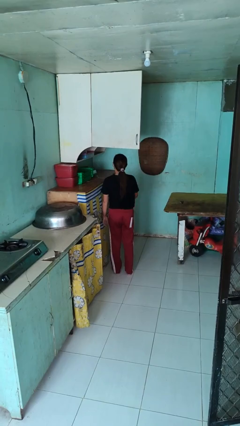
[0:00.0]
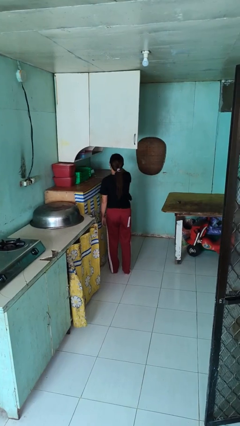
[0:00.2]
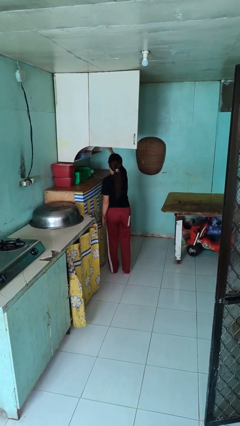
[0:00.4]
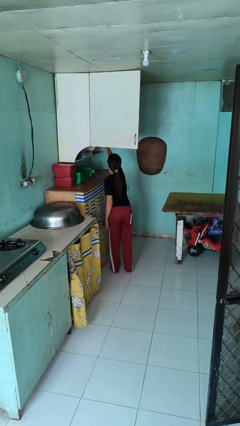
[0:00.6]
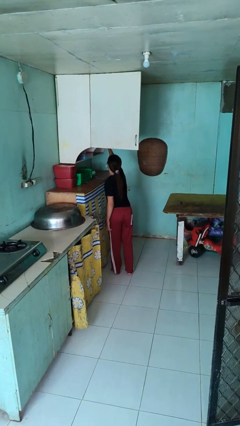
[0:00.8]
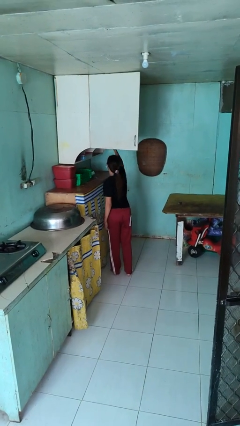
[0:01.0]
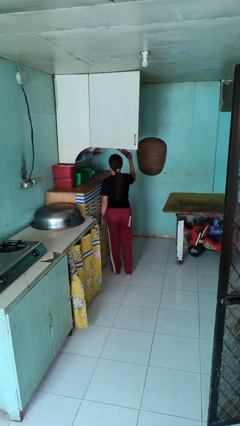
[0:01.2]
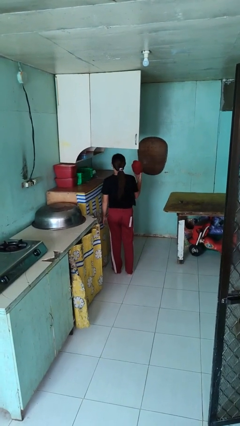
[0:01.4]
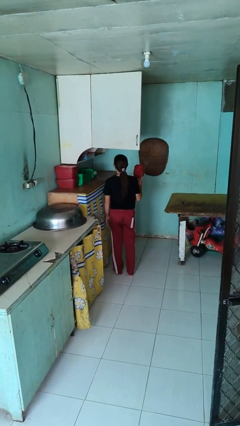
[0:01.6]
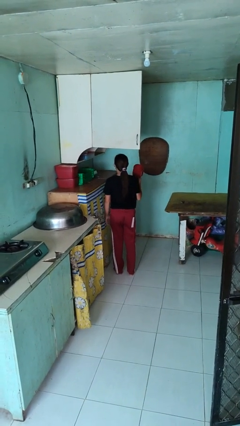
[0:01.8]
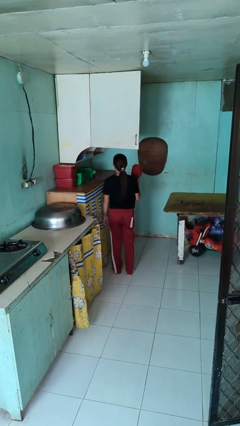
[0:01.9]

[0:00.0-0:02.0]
person takes object from cabinet

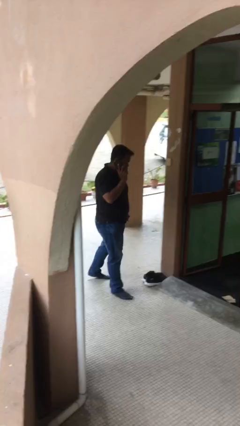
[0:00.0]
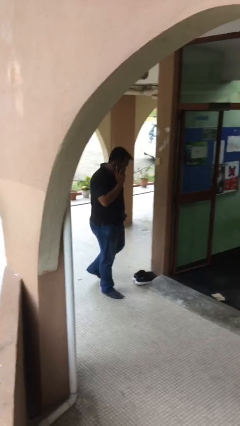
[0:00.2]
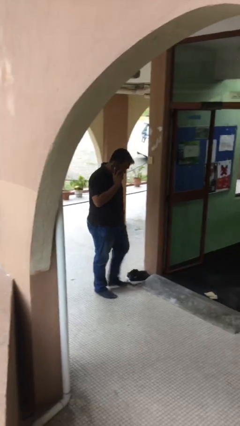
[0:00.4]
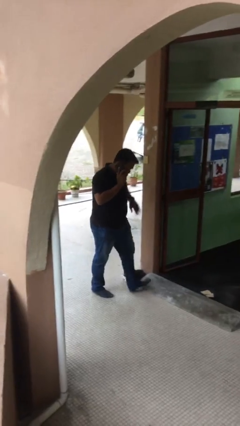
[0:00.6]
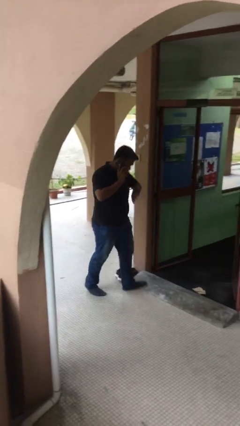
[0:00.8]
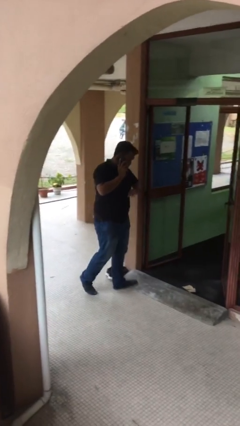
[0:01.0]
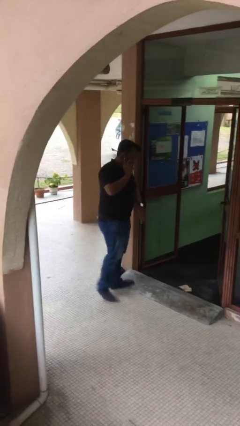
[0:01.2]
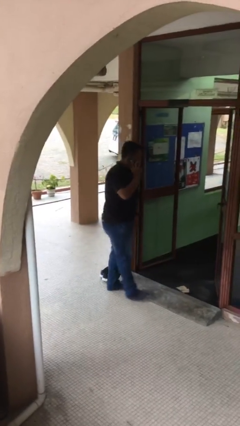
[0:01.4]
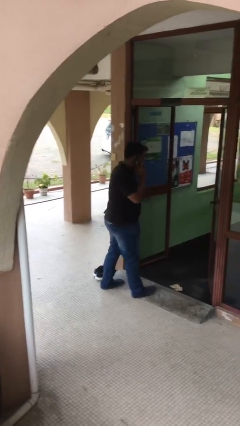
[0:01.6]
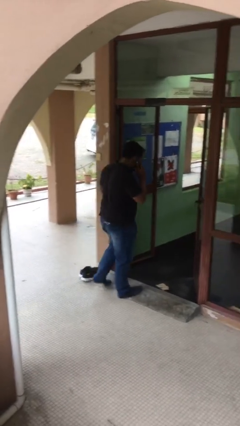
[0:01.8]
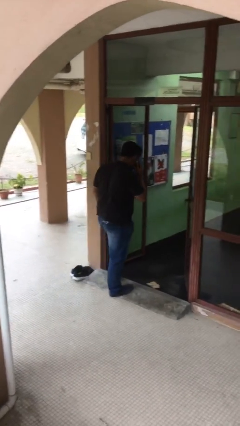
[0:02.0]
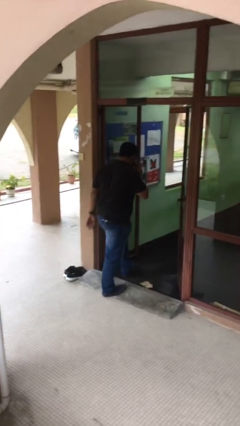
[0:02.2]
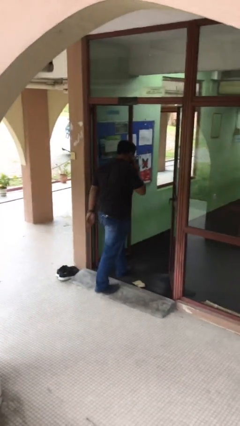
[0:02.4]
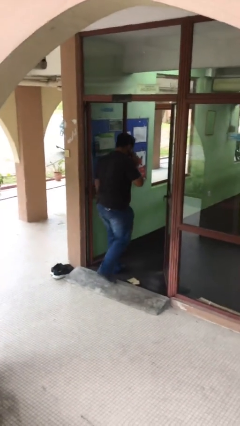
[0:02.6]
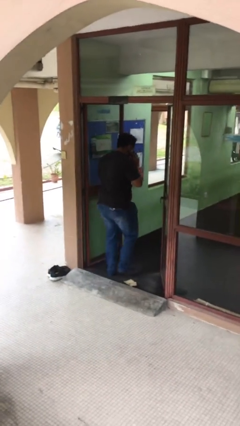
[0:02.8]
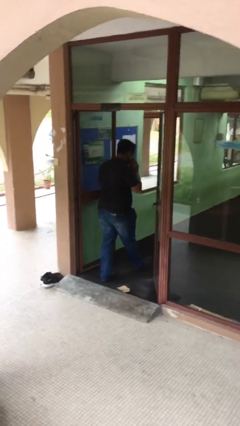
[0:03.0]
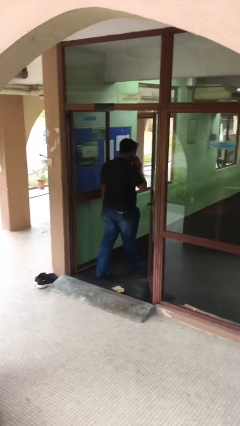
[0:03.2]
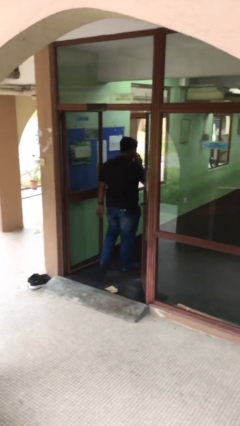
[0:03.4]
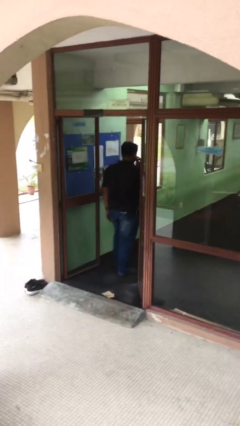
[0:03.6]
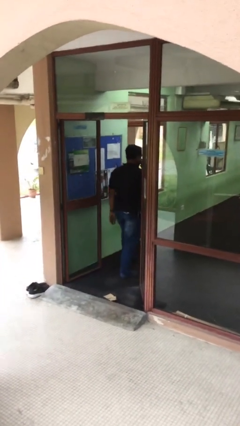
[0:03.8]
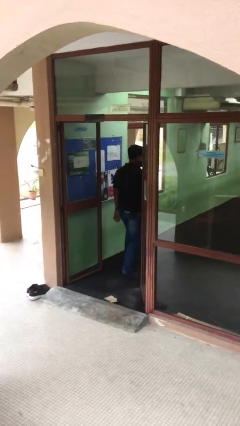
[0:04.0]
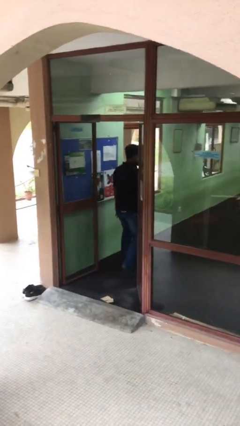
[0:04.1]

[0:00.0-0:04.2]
person exits scene through structure

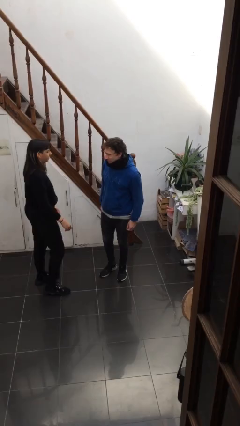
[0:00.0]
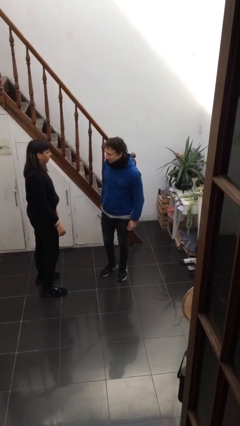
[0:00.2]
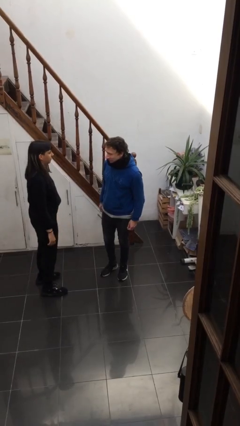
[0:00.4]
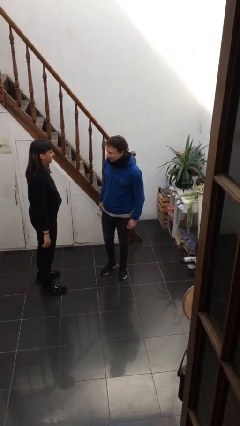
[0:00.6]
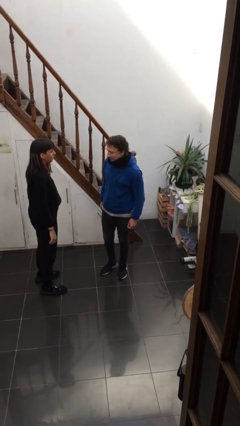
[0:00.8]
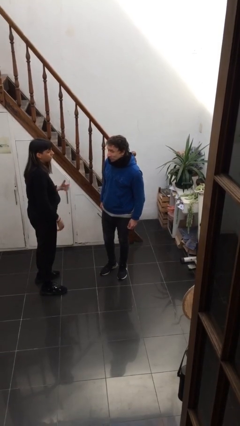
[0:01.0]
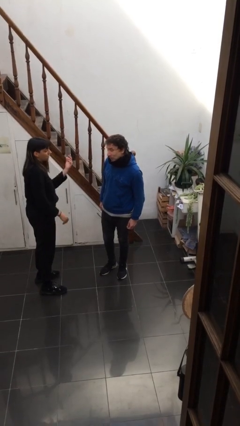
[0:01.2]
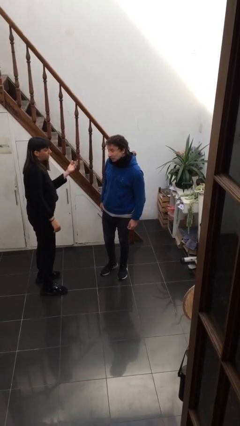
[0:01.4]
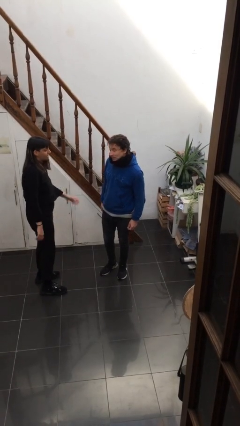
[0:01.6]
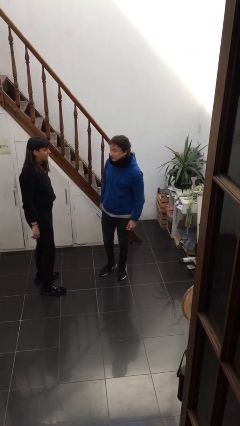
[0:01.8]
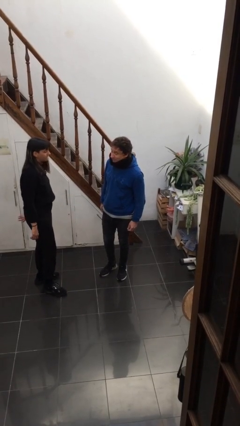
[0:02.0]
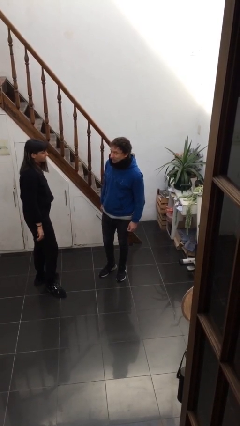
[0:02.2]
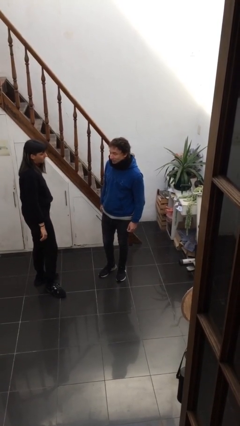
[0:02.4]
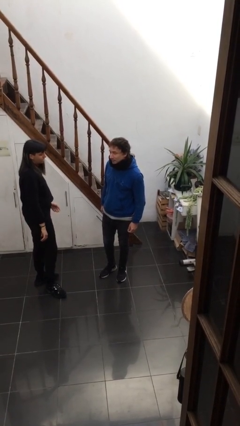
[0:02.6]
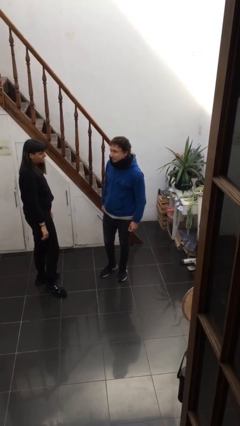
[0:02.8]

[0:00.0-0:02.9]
person talks to person

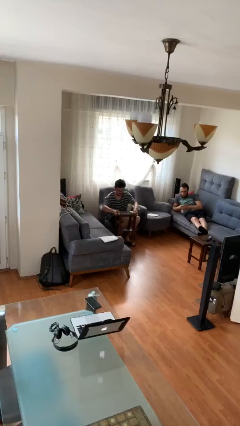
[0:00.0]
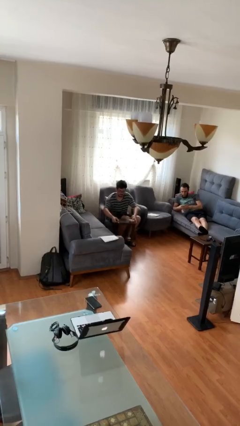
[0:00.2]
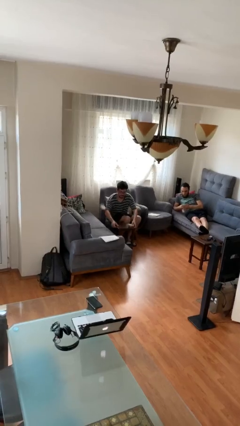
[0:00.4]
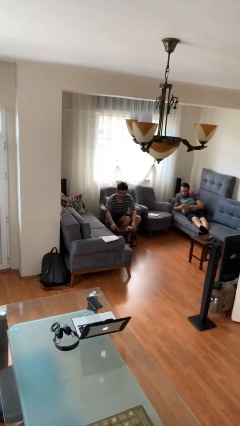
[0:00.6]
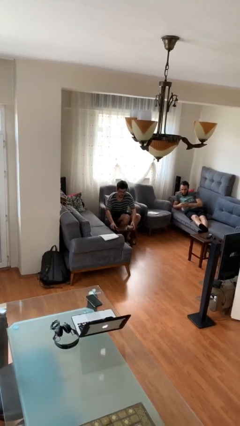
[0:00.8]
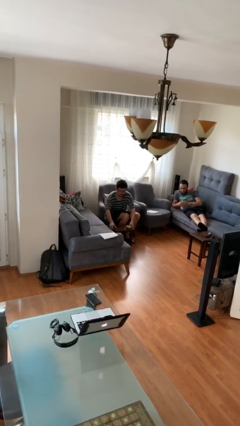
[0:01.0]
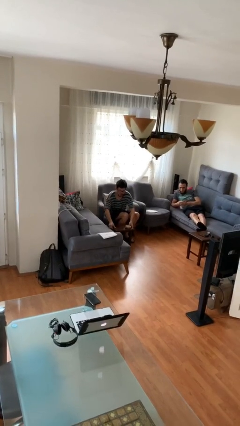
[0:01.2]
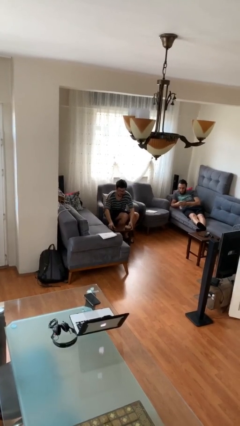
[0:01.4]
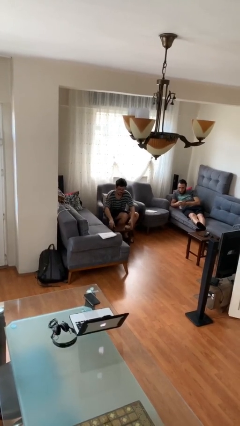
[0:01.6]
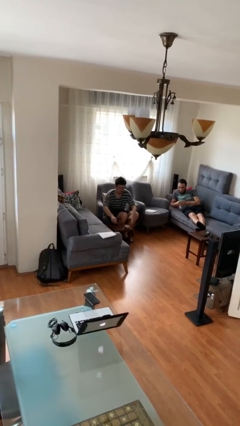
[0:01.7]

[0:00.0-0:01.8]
person puts down object on floor

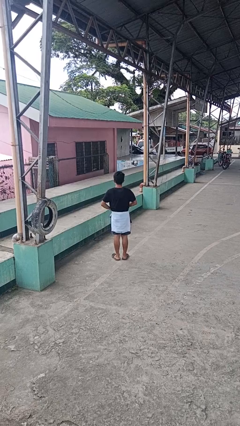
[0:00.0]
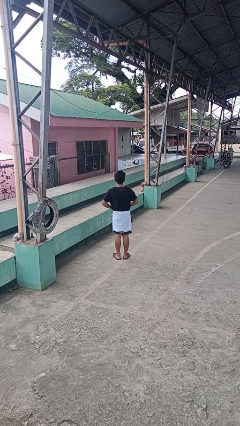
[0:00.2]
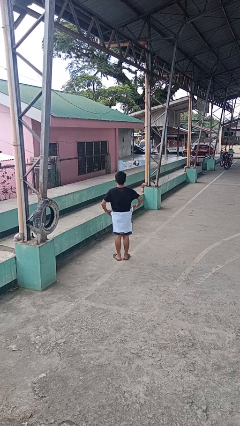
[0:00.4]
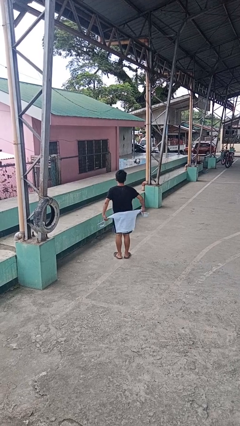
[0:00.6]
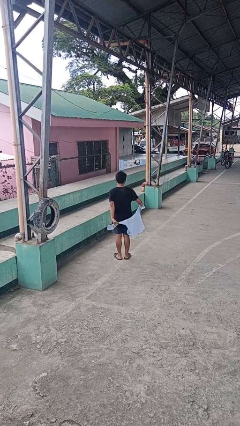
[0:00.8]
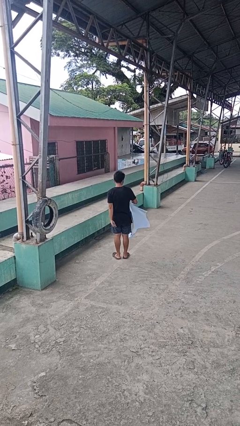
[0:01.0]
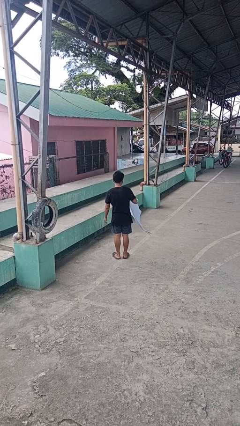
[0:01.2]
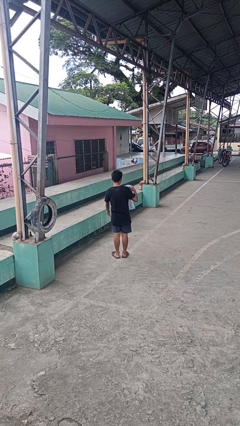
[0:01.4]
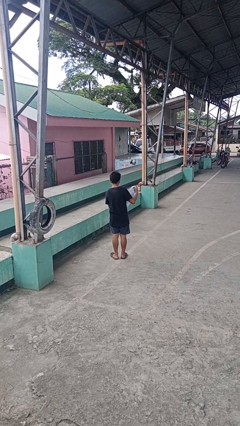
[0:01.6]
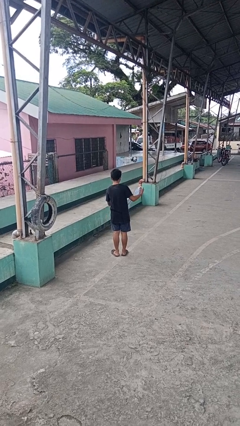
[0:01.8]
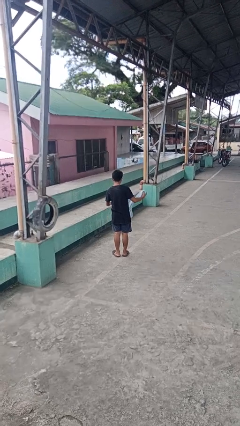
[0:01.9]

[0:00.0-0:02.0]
person unties jacket around waist

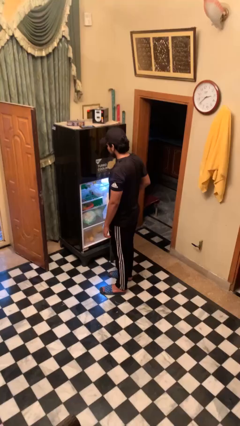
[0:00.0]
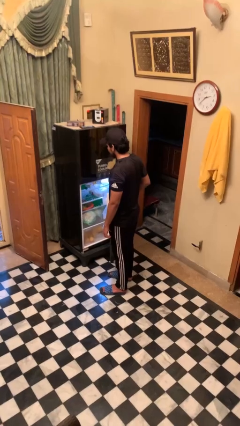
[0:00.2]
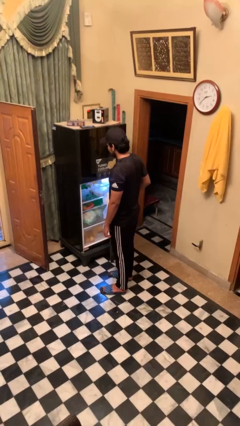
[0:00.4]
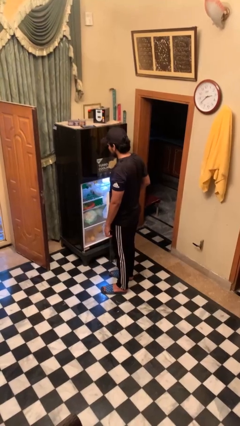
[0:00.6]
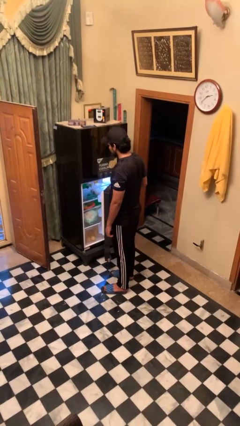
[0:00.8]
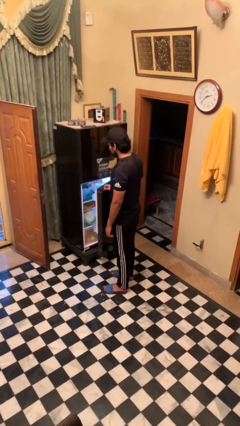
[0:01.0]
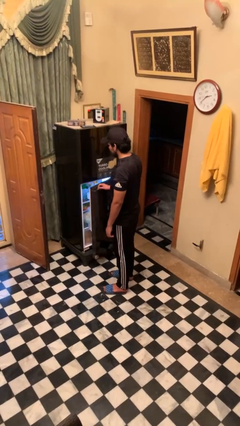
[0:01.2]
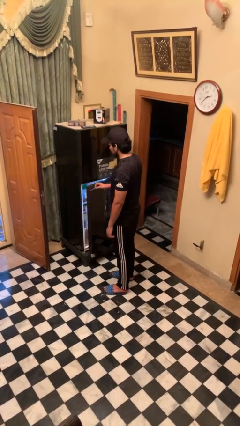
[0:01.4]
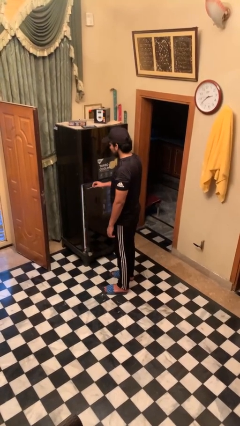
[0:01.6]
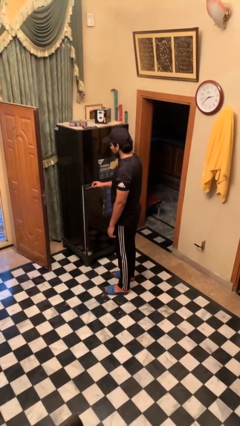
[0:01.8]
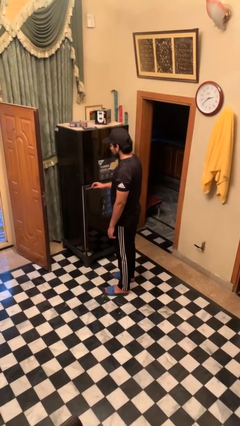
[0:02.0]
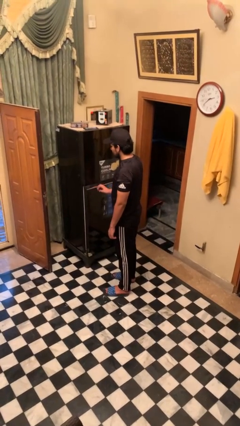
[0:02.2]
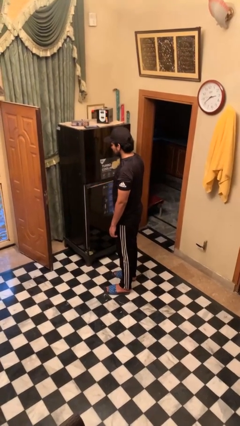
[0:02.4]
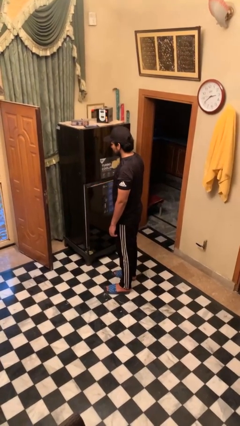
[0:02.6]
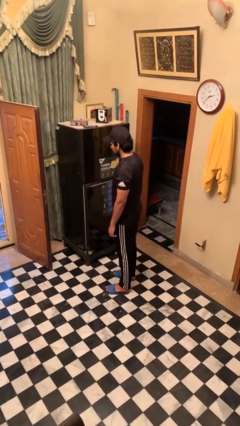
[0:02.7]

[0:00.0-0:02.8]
person closes refrigerator

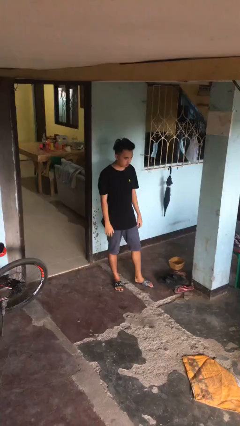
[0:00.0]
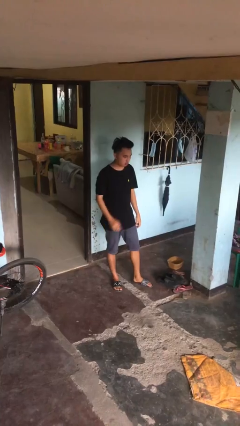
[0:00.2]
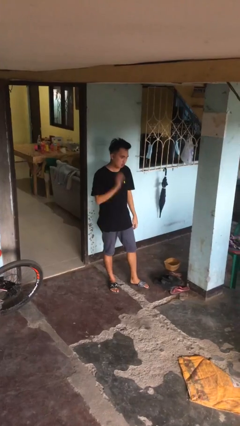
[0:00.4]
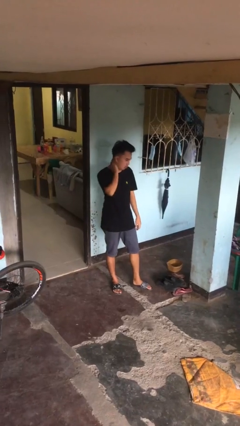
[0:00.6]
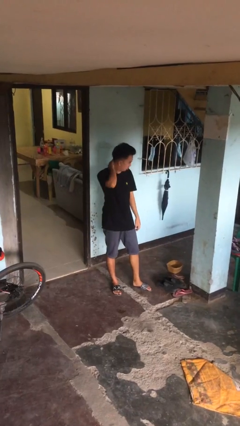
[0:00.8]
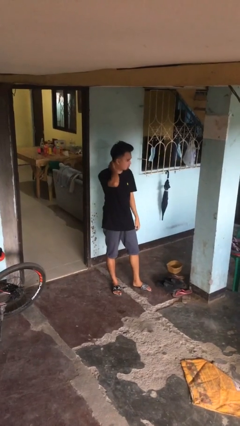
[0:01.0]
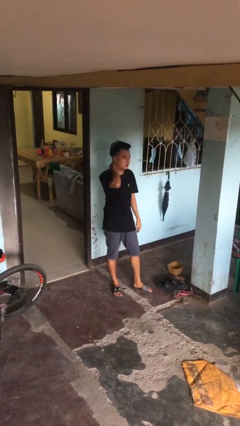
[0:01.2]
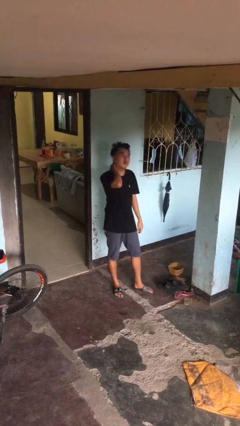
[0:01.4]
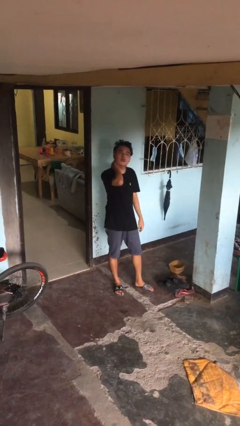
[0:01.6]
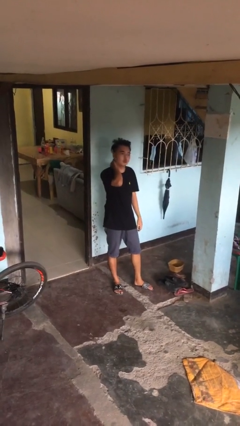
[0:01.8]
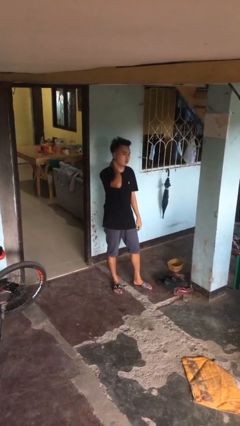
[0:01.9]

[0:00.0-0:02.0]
person rubs neck
